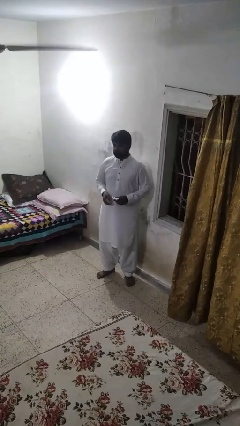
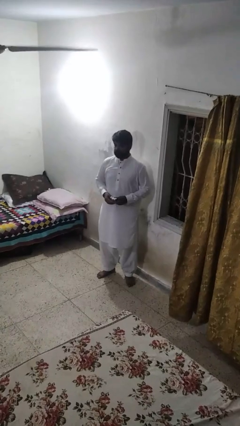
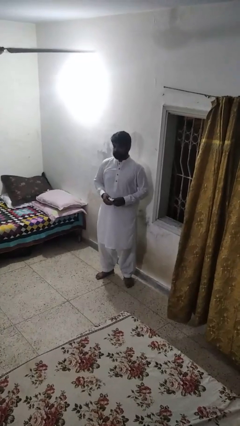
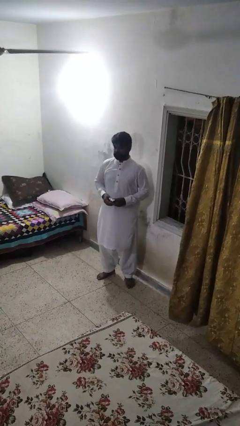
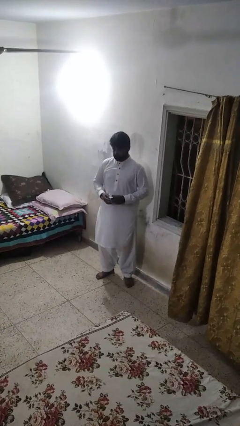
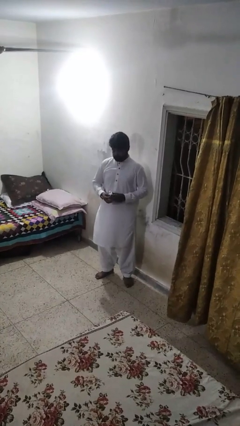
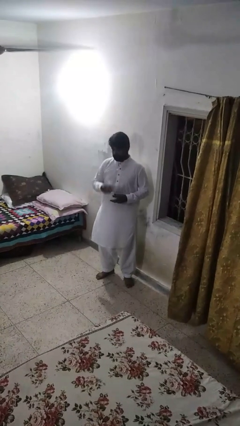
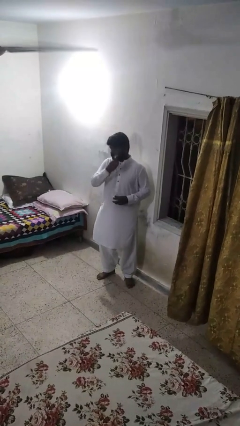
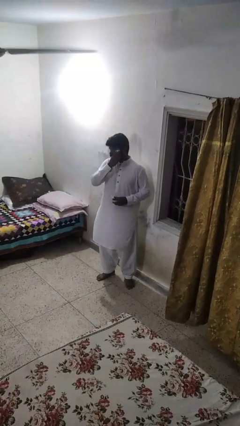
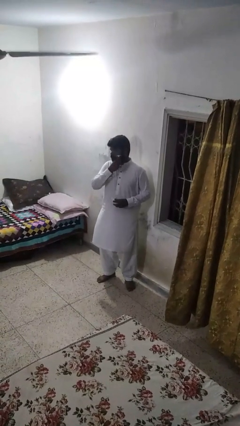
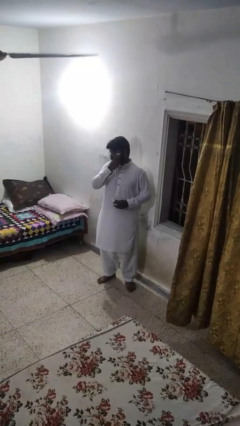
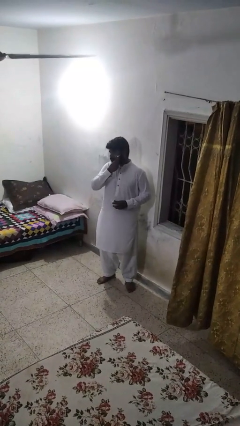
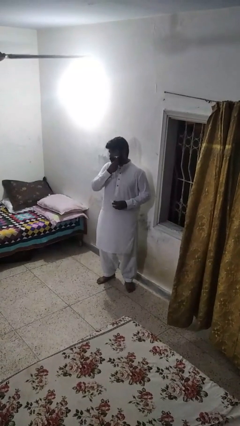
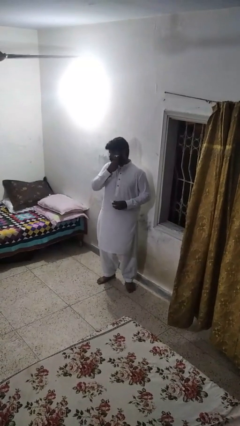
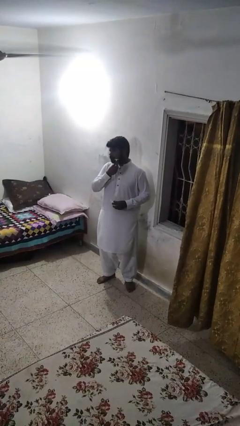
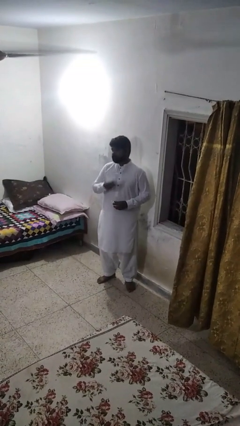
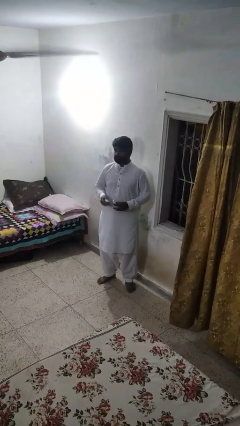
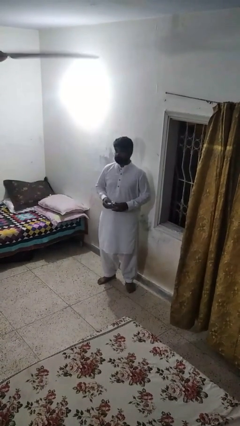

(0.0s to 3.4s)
person shaves face

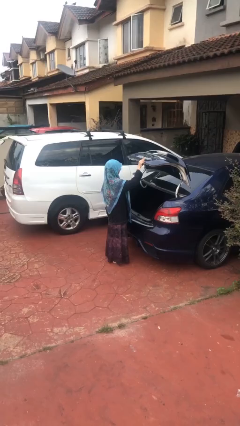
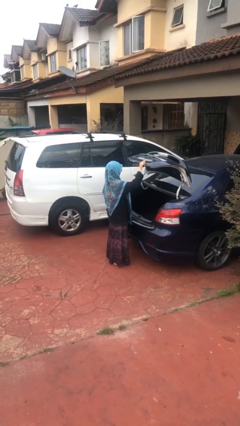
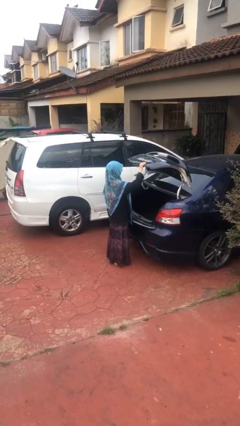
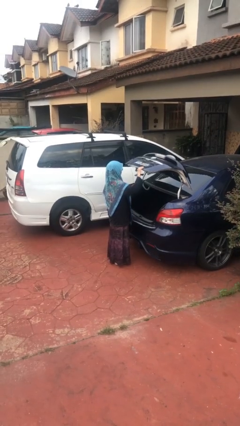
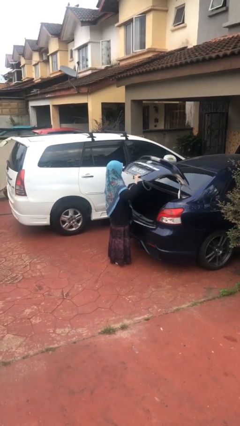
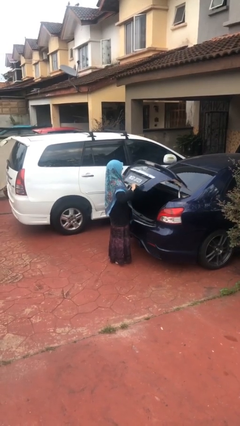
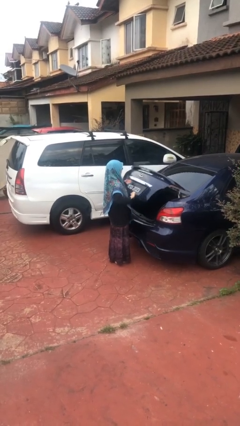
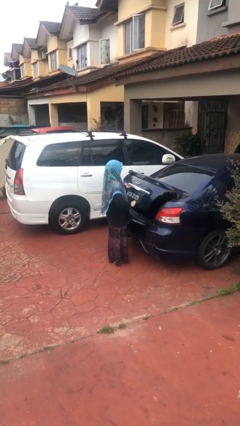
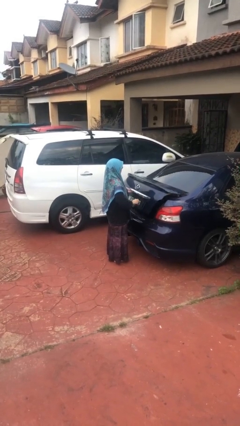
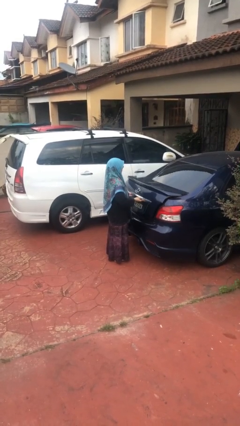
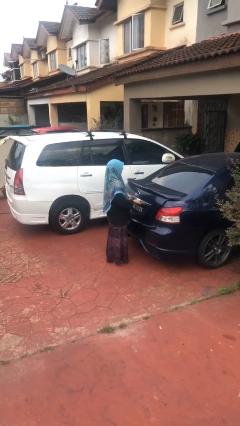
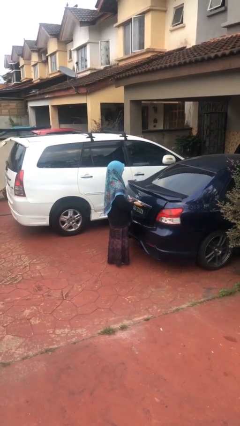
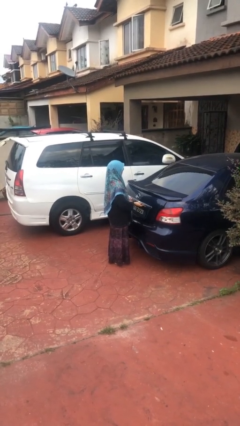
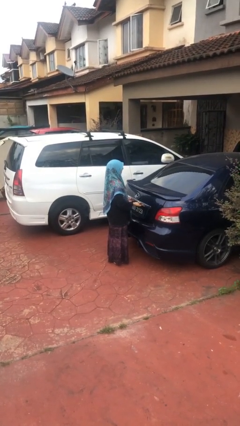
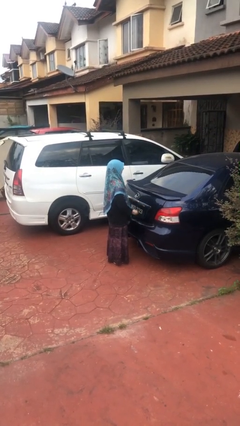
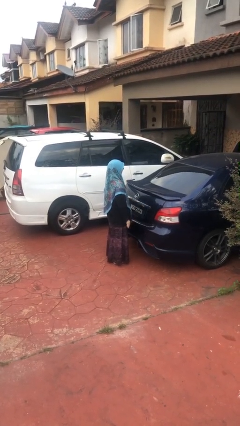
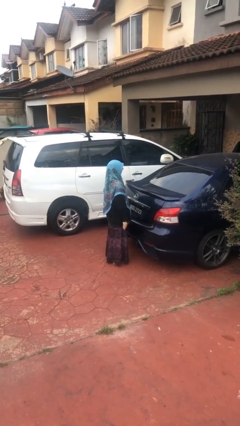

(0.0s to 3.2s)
person closes car trunk

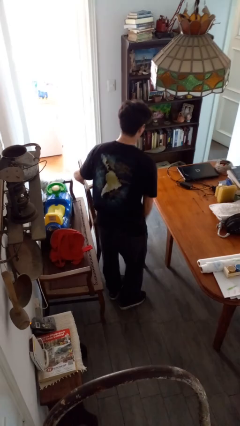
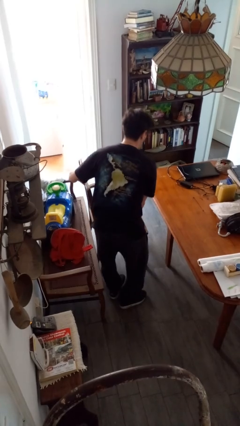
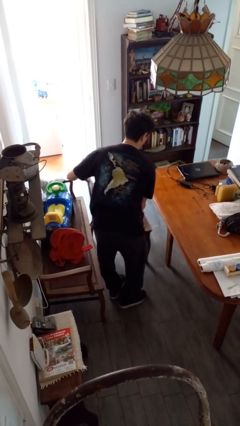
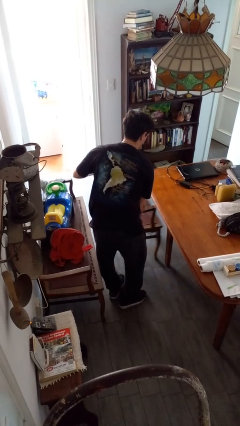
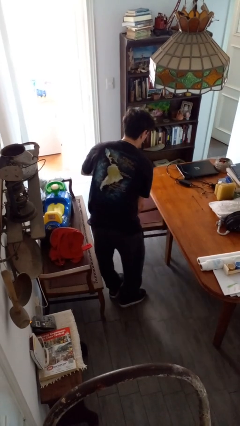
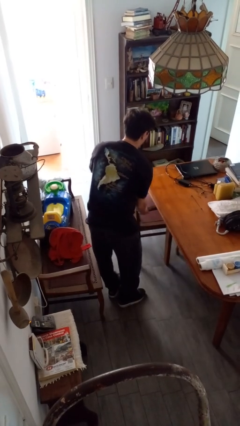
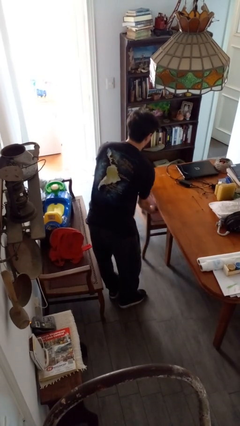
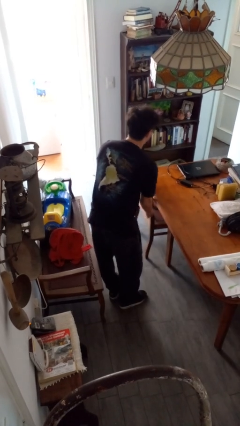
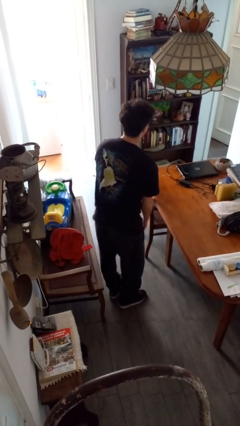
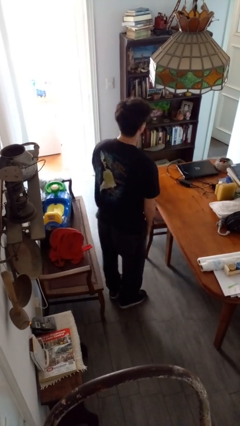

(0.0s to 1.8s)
person pushes in chair

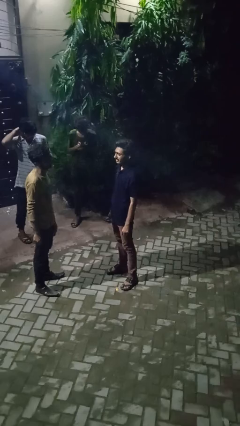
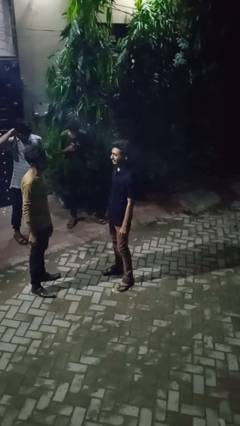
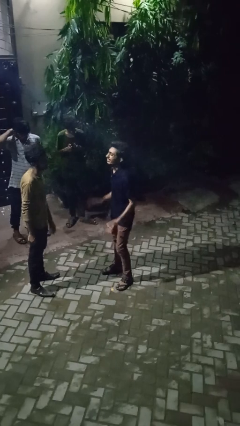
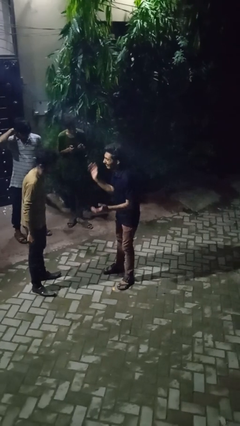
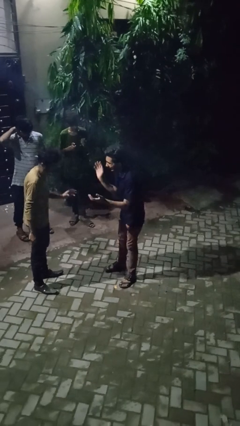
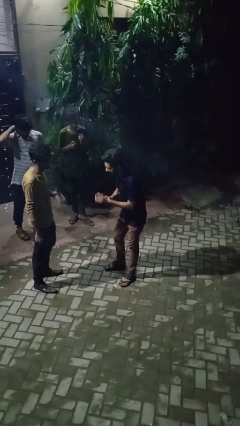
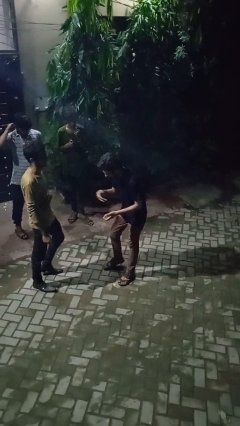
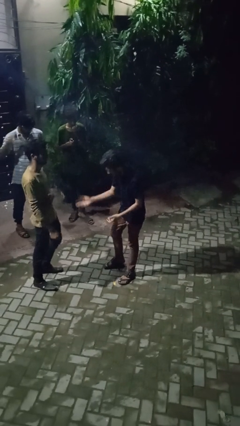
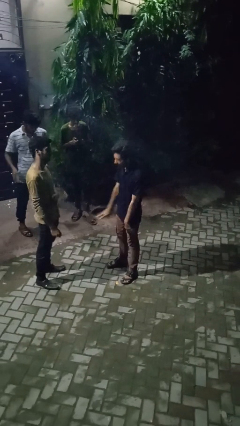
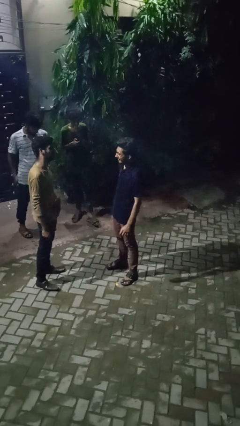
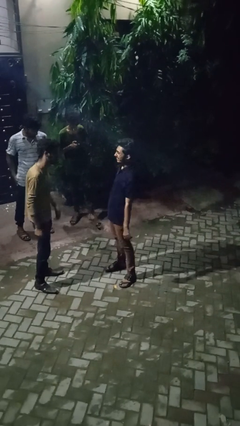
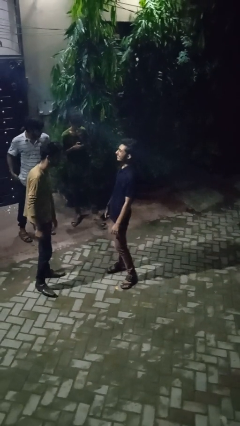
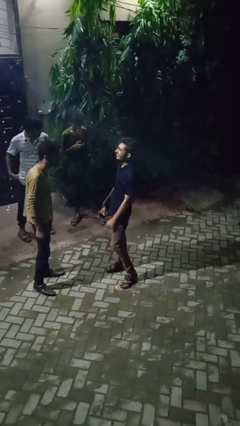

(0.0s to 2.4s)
person laughs with person

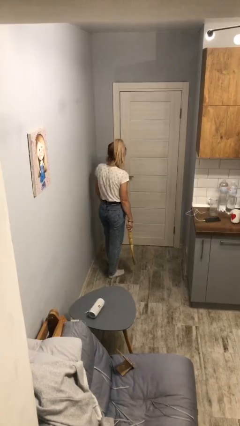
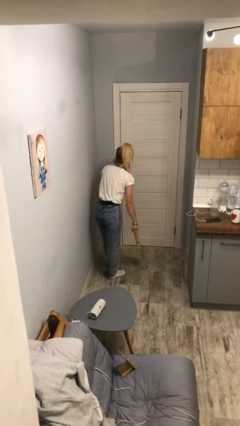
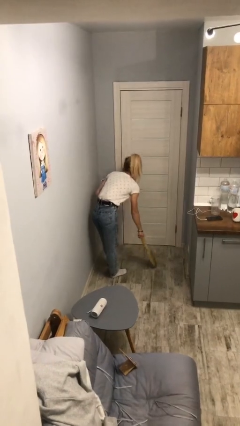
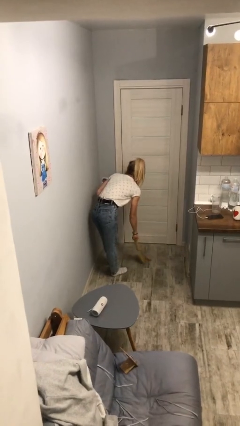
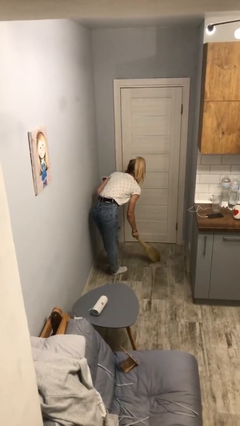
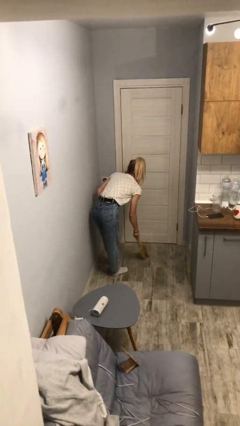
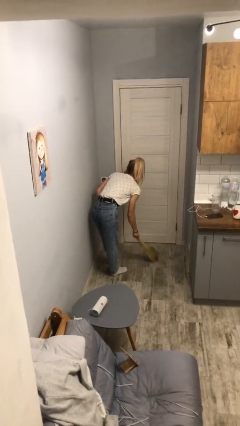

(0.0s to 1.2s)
person sweeps floor

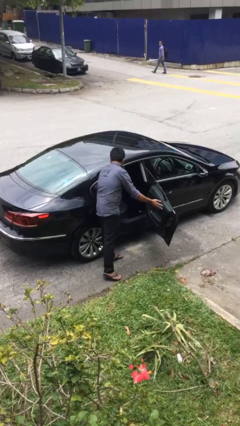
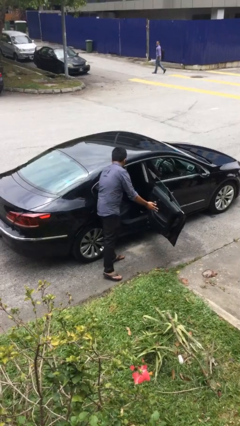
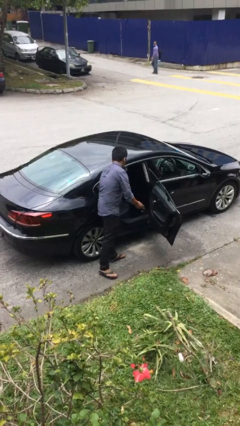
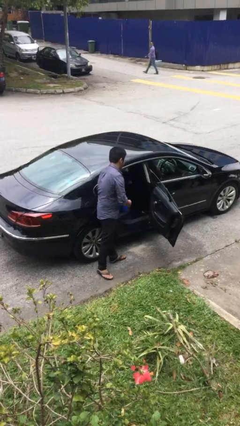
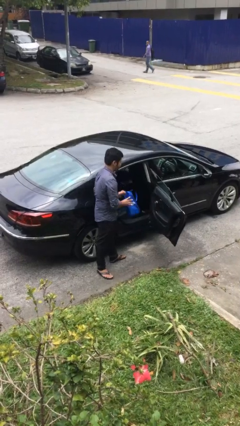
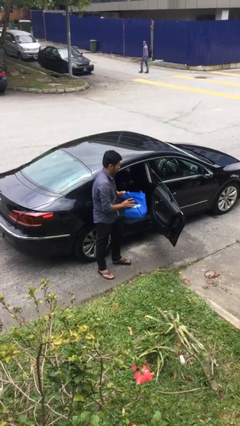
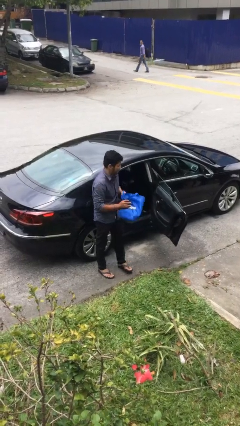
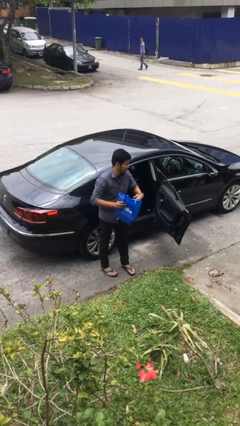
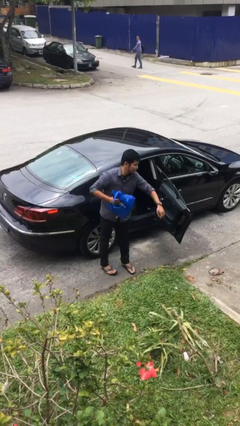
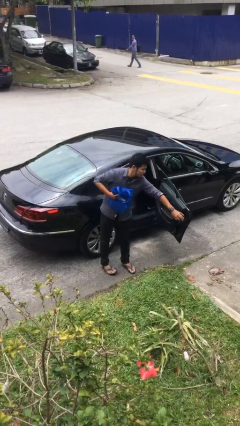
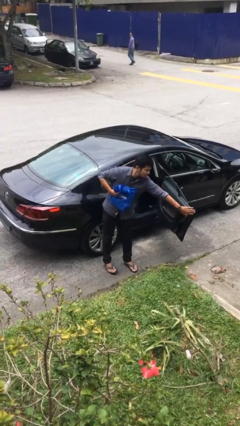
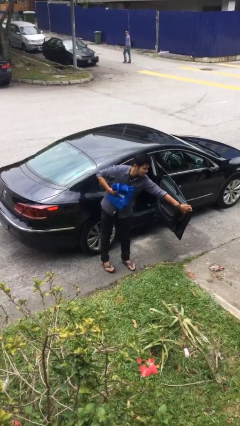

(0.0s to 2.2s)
person unloads car

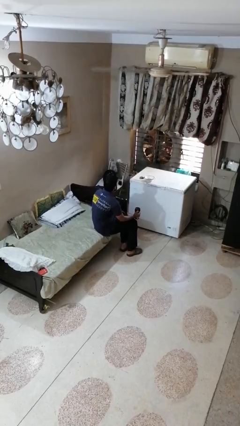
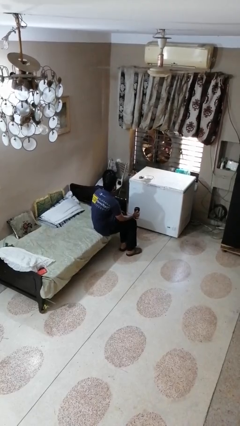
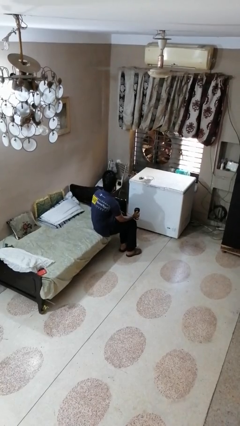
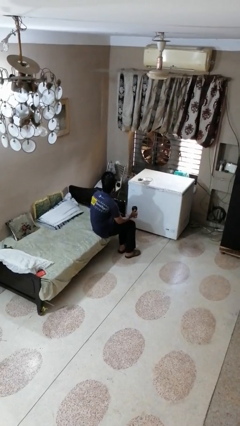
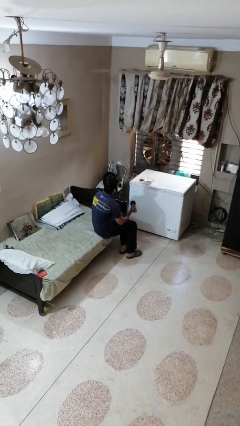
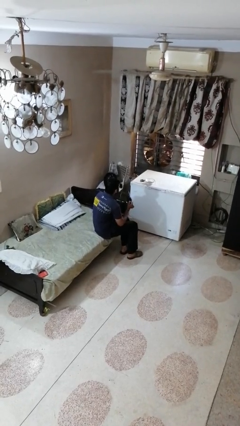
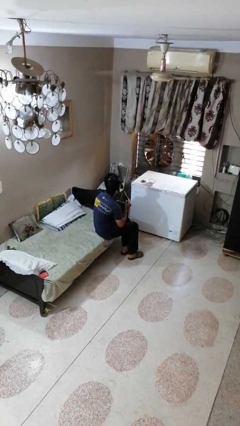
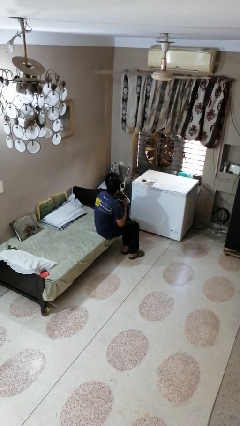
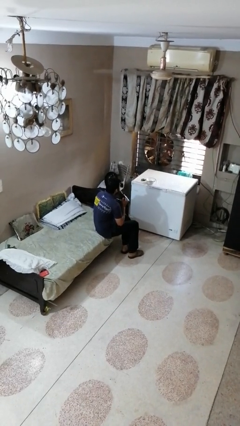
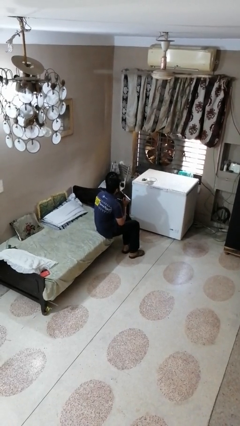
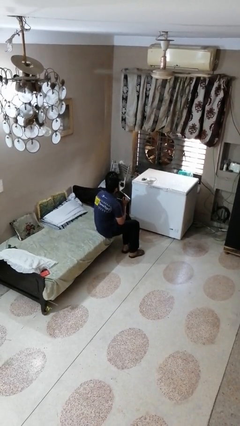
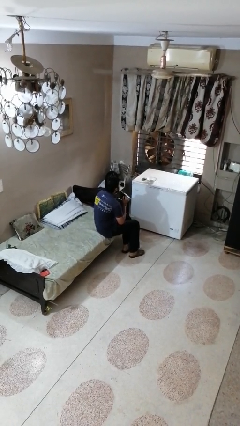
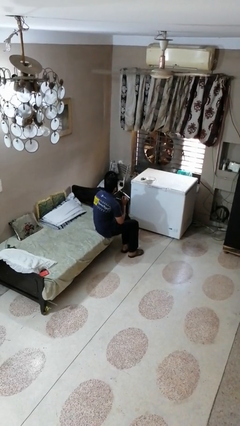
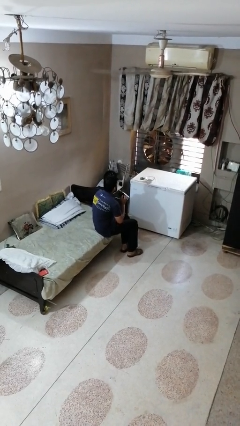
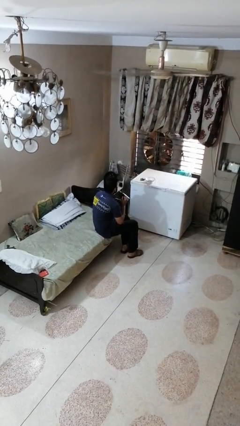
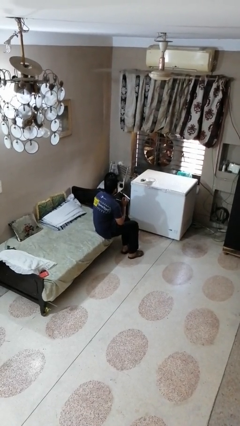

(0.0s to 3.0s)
person drinks from straw
